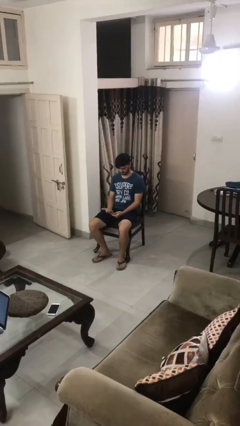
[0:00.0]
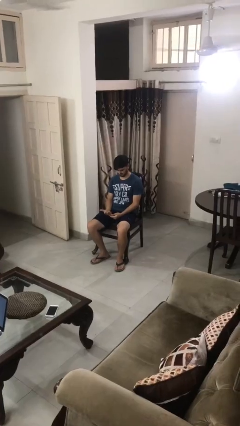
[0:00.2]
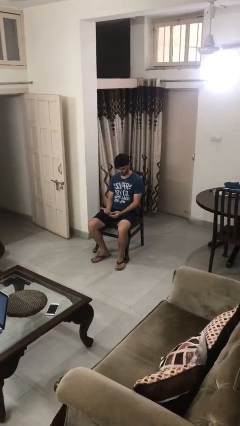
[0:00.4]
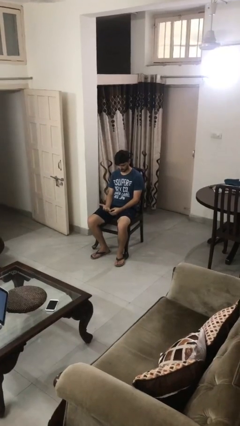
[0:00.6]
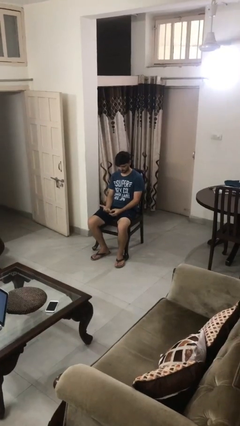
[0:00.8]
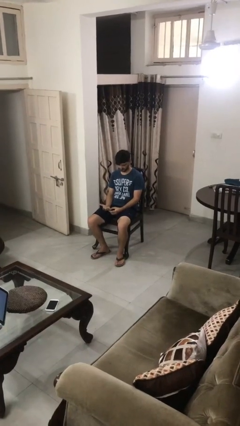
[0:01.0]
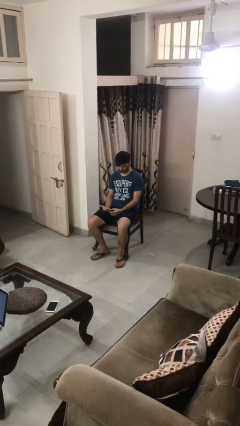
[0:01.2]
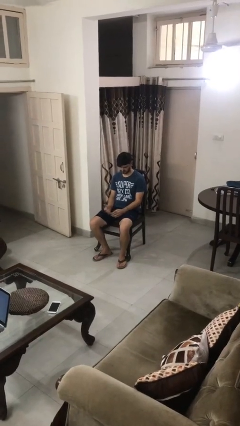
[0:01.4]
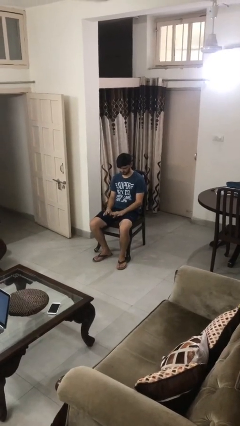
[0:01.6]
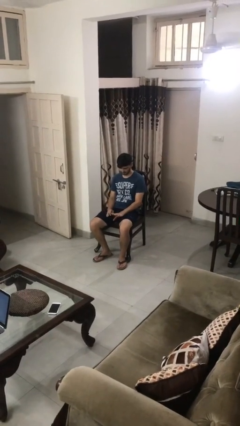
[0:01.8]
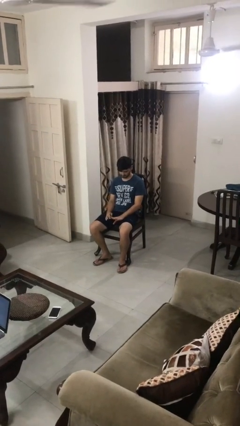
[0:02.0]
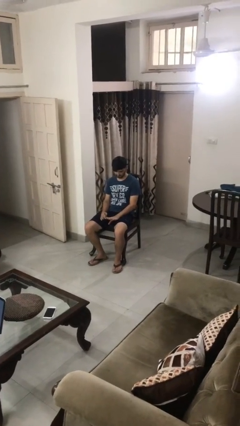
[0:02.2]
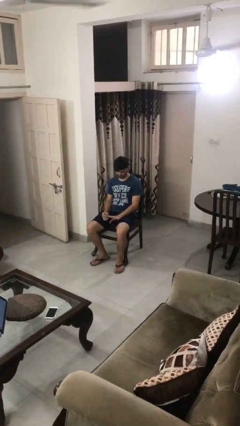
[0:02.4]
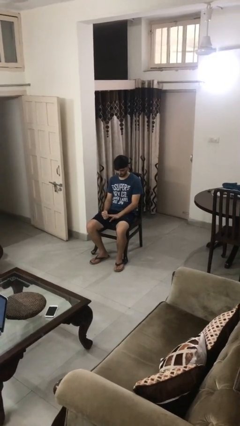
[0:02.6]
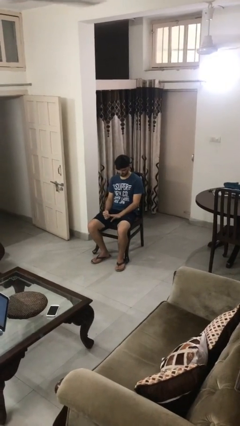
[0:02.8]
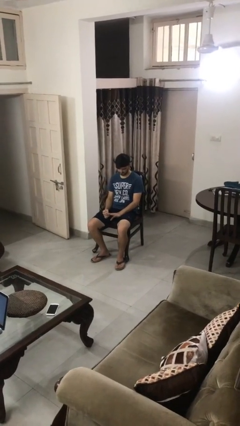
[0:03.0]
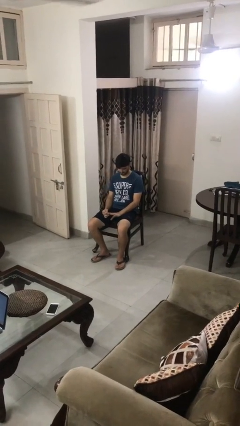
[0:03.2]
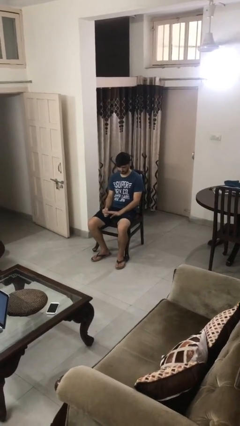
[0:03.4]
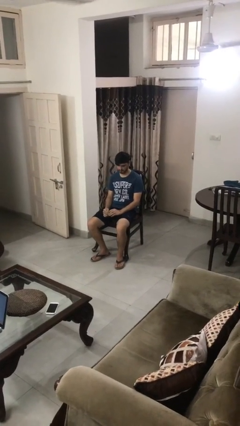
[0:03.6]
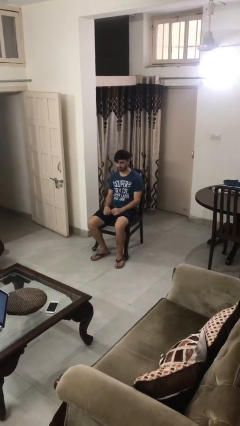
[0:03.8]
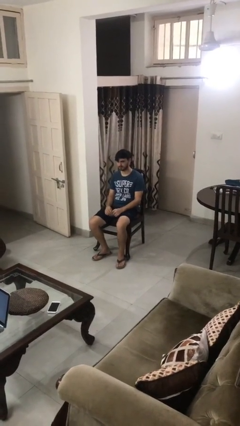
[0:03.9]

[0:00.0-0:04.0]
person looks at hands in lap

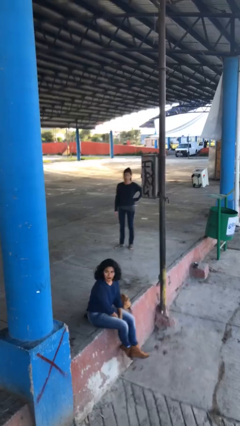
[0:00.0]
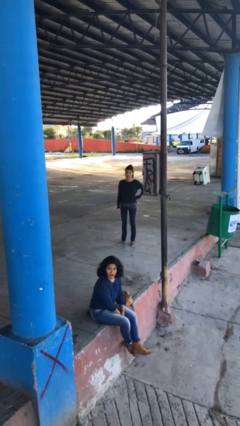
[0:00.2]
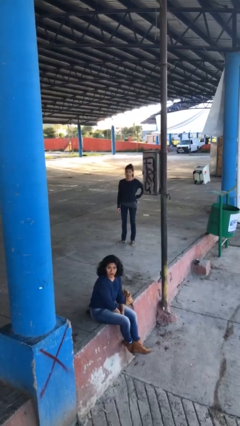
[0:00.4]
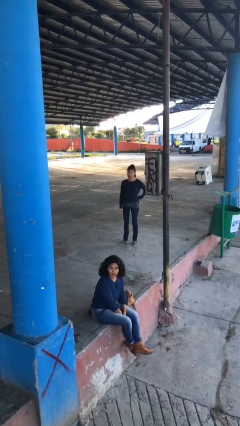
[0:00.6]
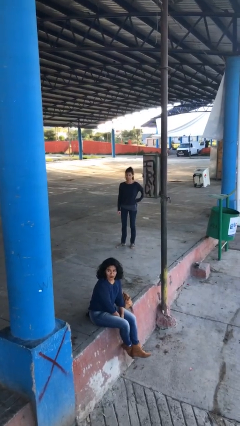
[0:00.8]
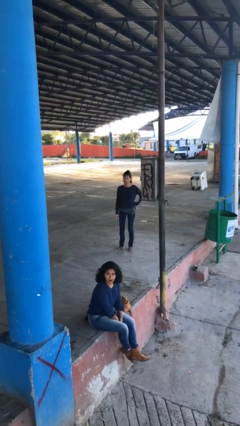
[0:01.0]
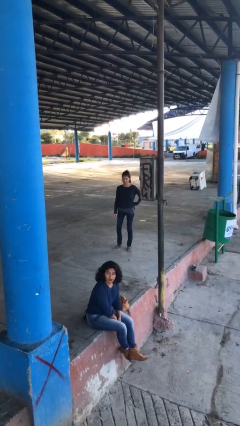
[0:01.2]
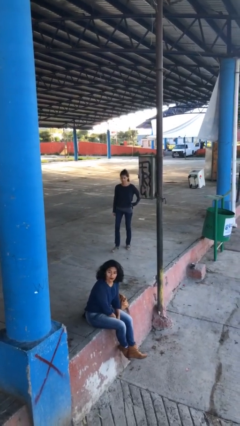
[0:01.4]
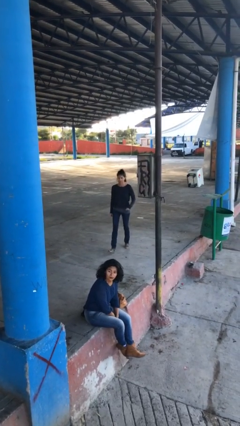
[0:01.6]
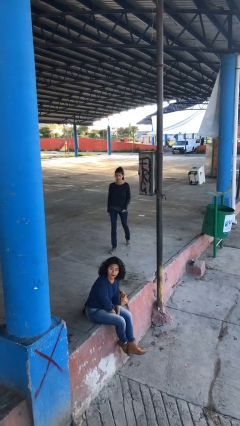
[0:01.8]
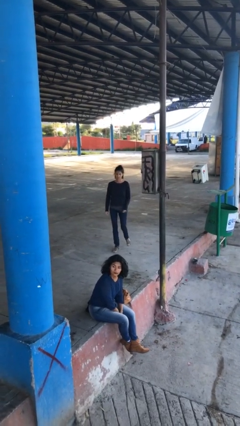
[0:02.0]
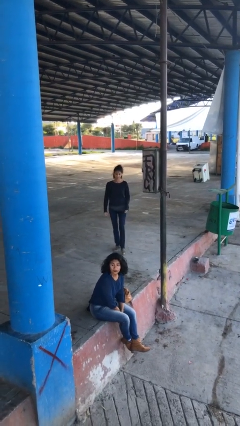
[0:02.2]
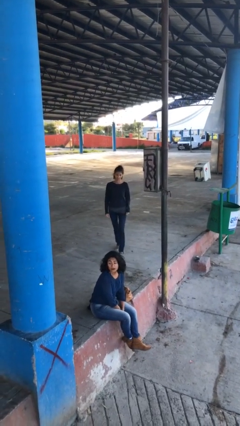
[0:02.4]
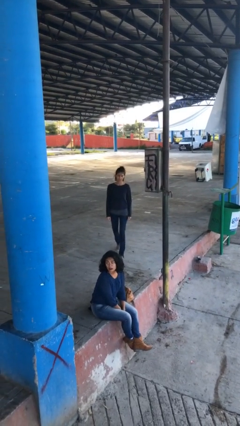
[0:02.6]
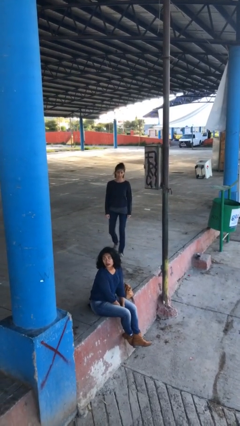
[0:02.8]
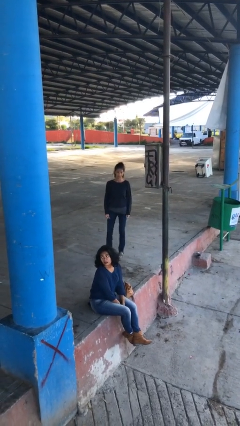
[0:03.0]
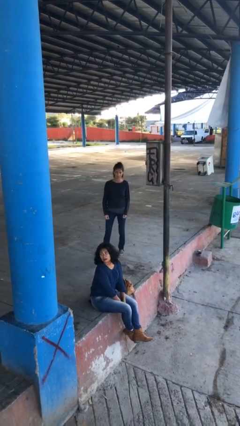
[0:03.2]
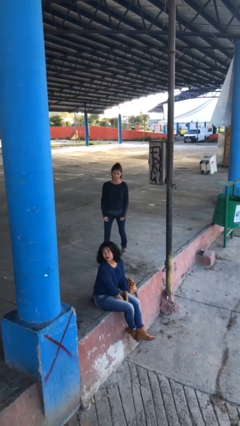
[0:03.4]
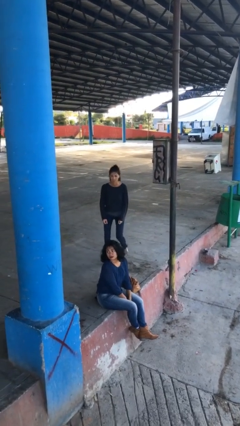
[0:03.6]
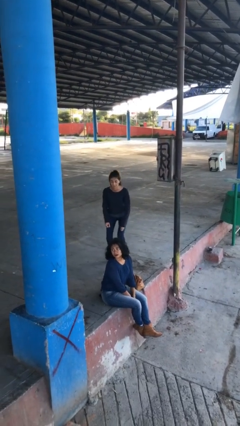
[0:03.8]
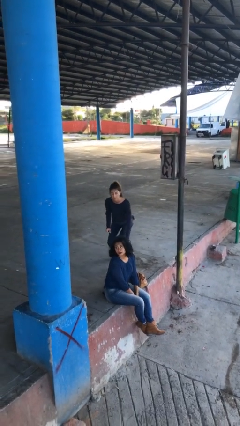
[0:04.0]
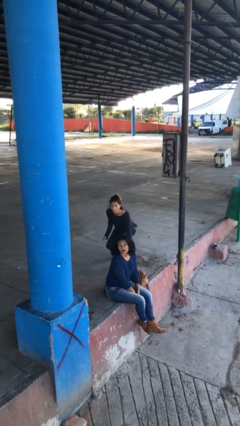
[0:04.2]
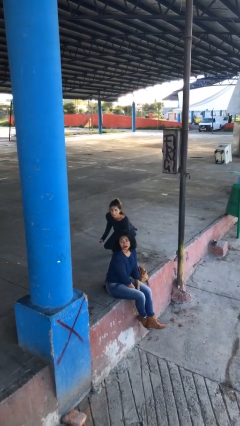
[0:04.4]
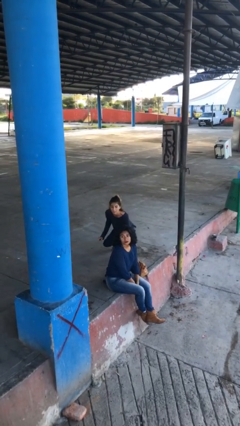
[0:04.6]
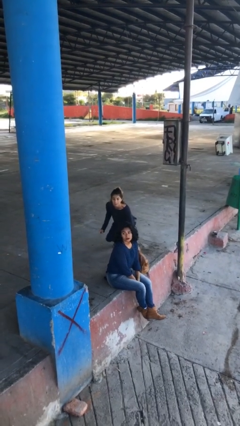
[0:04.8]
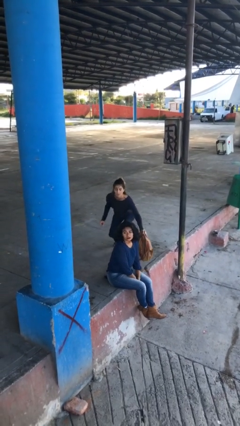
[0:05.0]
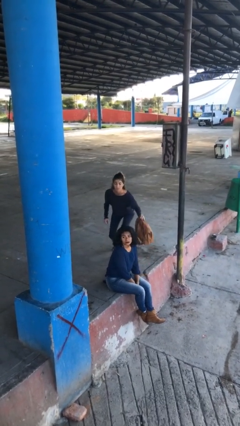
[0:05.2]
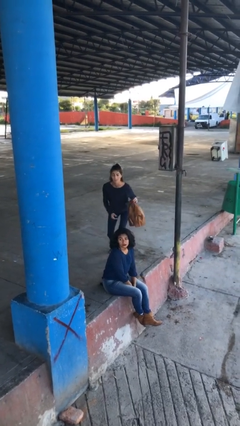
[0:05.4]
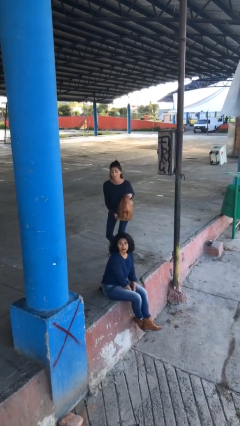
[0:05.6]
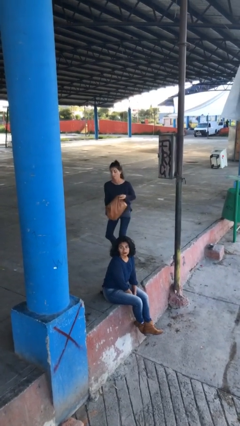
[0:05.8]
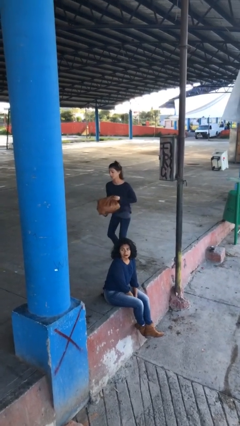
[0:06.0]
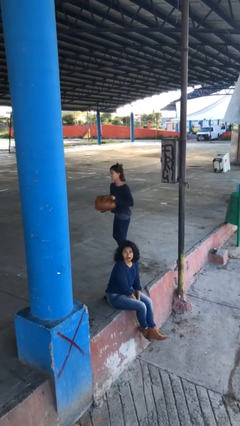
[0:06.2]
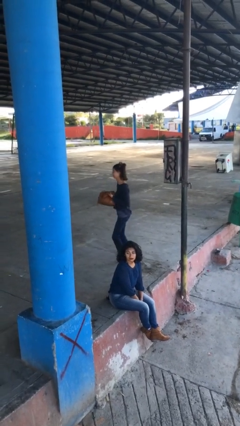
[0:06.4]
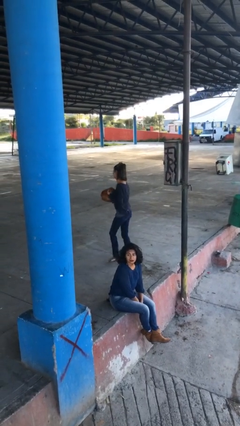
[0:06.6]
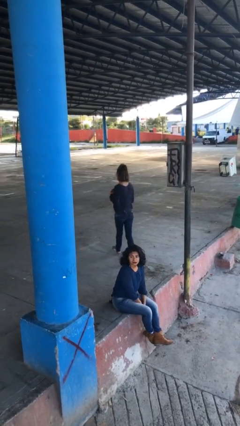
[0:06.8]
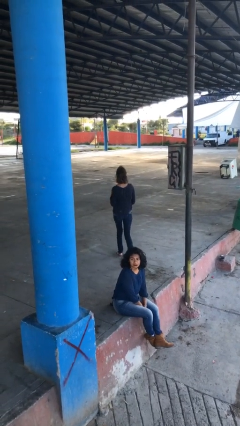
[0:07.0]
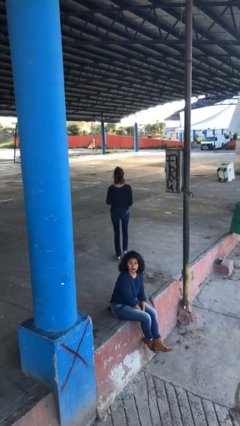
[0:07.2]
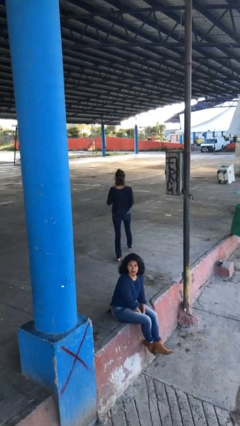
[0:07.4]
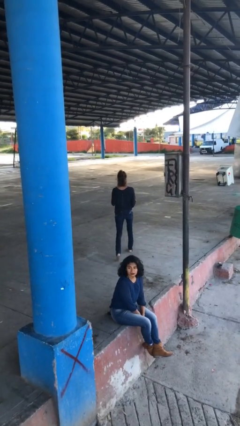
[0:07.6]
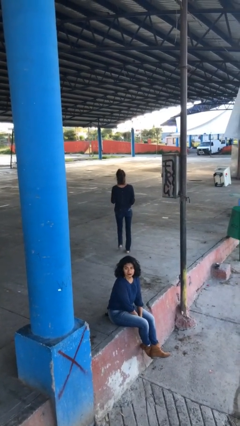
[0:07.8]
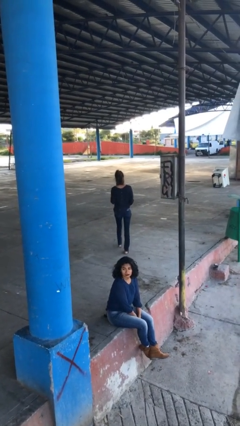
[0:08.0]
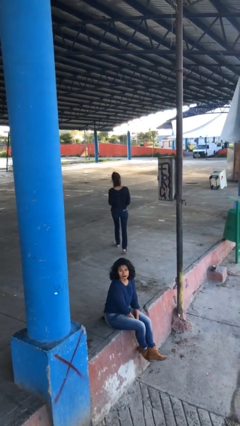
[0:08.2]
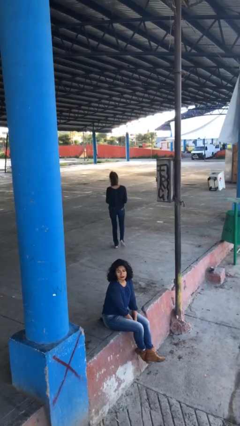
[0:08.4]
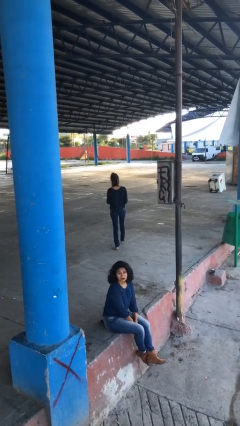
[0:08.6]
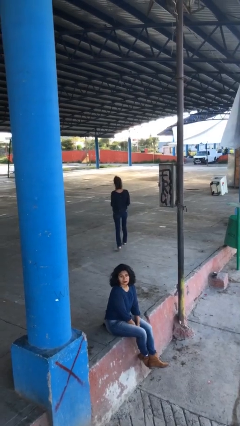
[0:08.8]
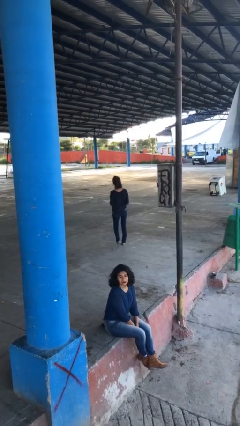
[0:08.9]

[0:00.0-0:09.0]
person steals object from person

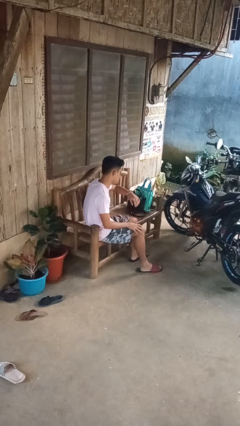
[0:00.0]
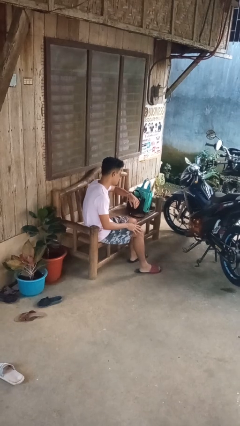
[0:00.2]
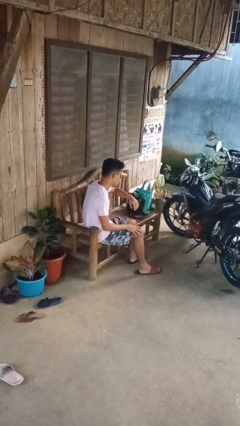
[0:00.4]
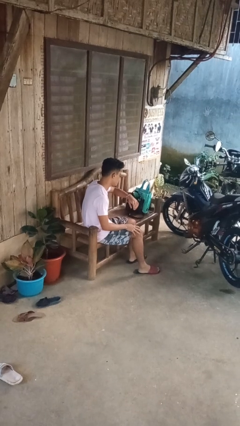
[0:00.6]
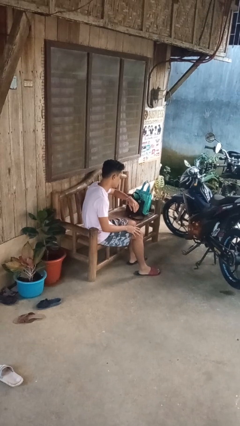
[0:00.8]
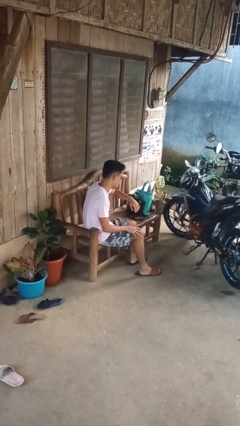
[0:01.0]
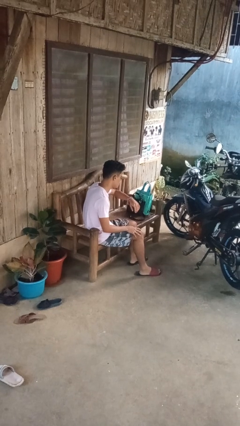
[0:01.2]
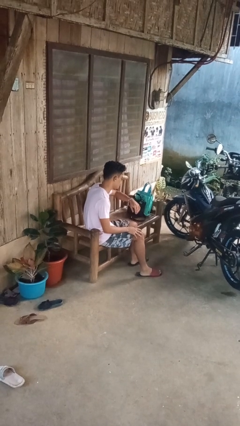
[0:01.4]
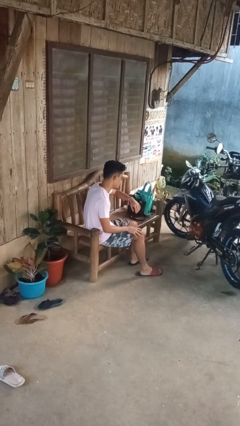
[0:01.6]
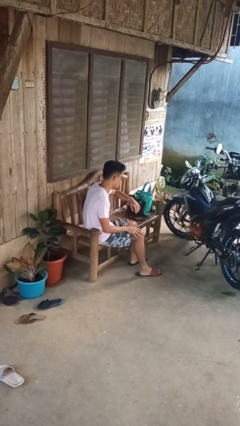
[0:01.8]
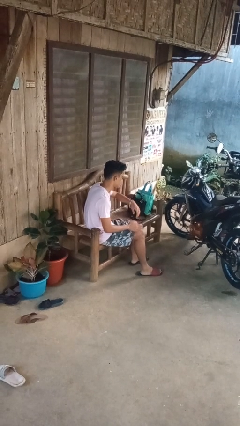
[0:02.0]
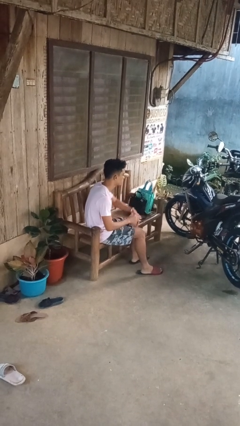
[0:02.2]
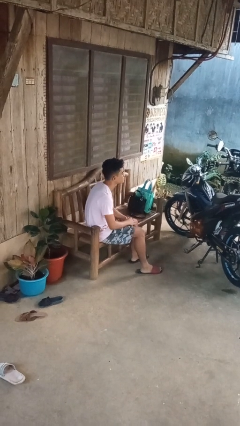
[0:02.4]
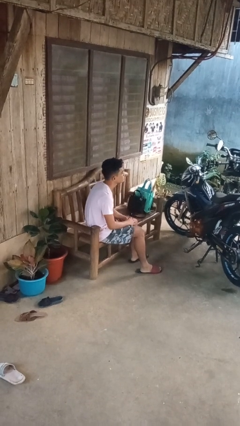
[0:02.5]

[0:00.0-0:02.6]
person looks at wristwatch

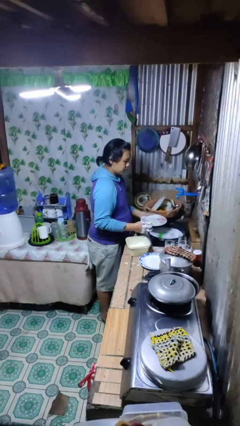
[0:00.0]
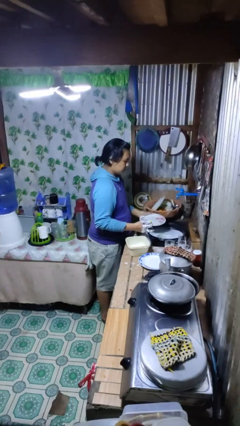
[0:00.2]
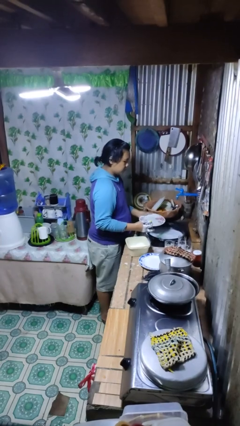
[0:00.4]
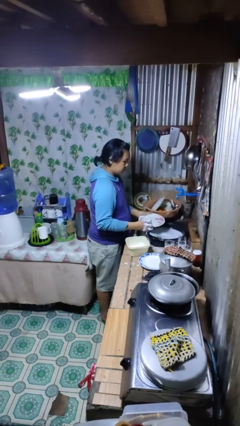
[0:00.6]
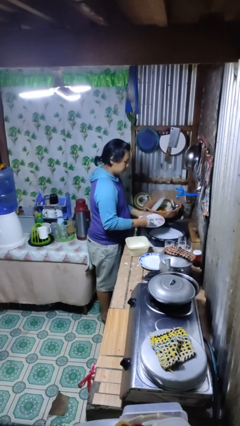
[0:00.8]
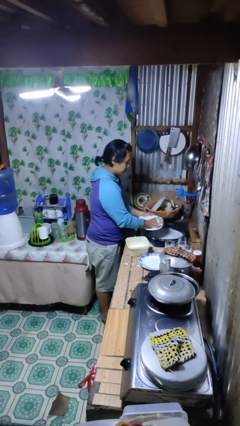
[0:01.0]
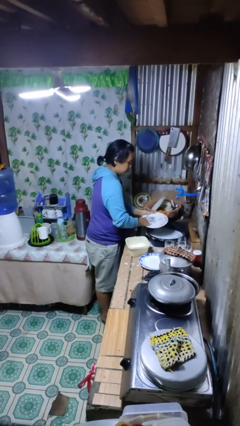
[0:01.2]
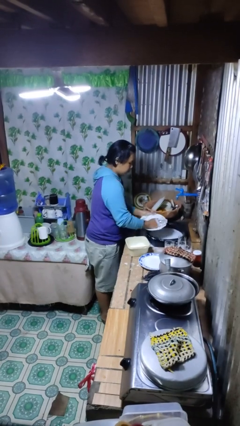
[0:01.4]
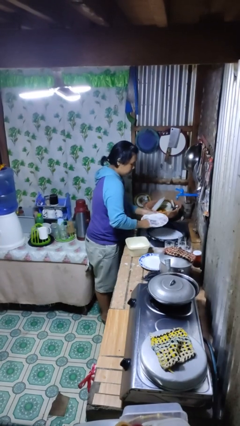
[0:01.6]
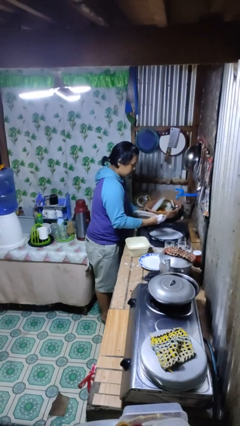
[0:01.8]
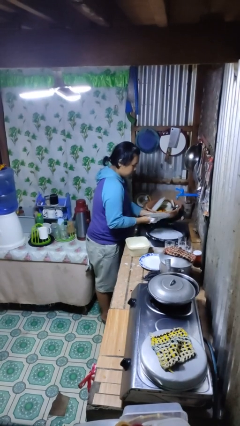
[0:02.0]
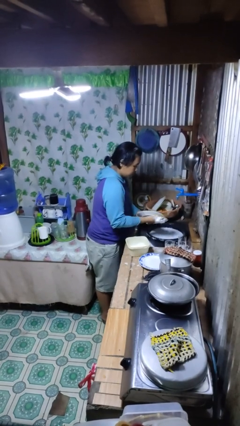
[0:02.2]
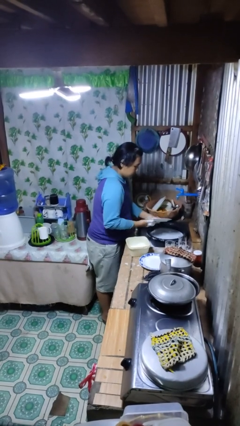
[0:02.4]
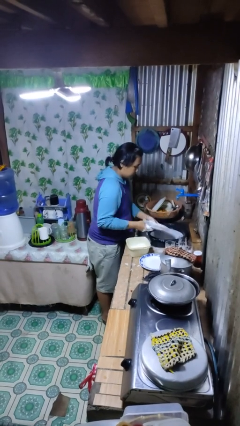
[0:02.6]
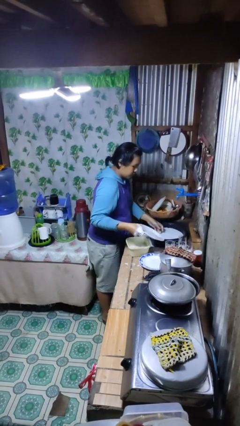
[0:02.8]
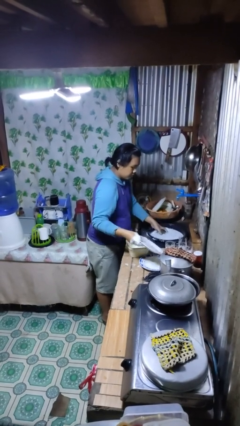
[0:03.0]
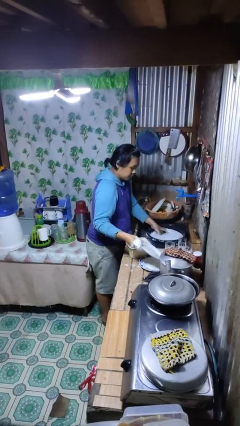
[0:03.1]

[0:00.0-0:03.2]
person washes dish
